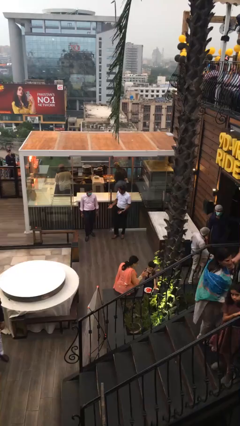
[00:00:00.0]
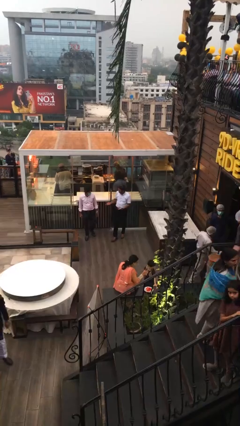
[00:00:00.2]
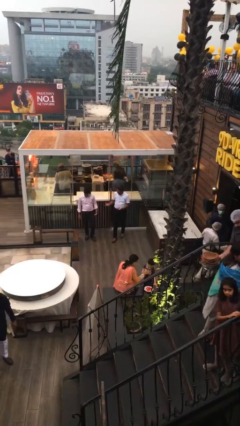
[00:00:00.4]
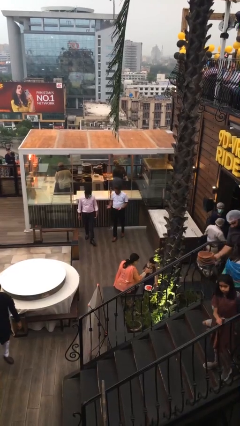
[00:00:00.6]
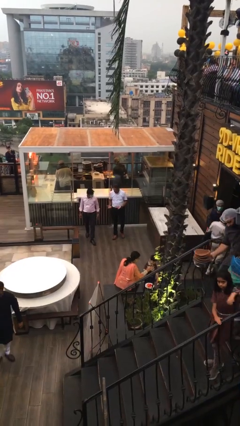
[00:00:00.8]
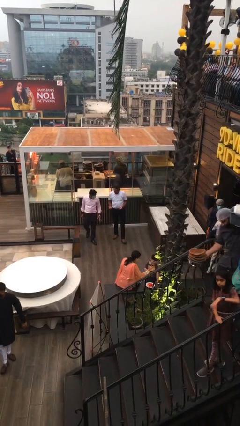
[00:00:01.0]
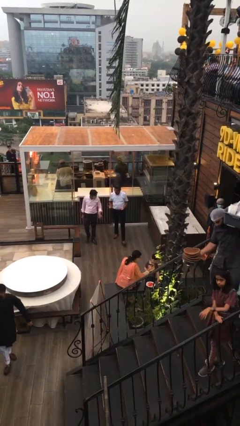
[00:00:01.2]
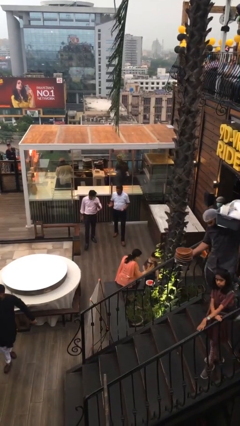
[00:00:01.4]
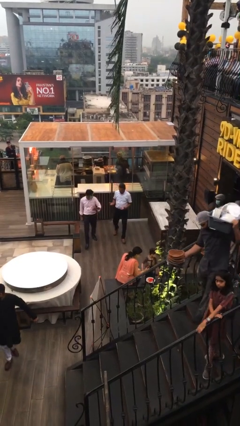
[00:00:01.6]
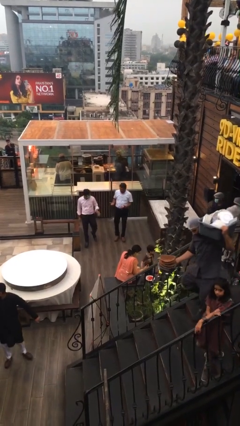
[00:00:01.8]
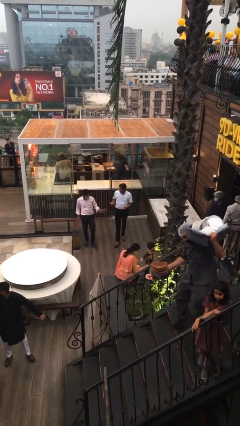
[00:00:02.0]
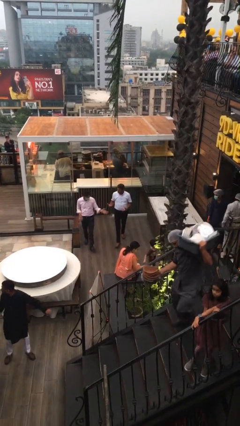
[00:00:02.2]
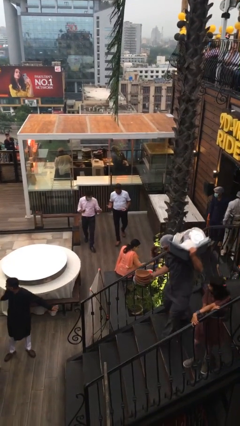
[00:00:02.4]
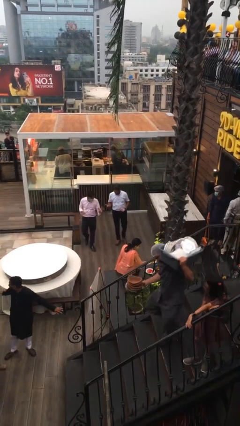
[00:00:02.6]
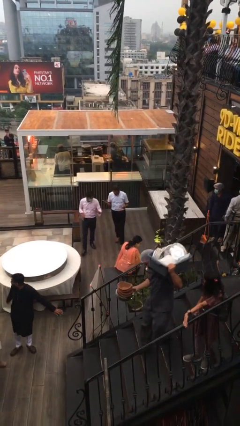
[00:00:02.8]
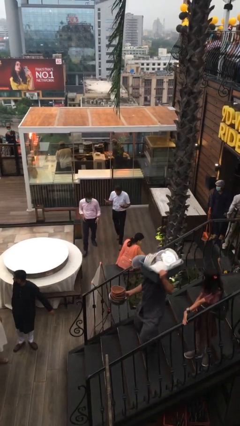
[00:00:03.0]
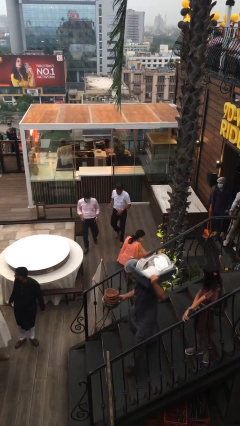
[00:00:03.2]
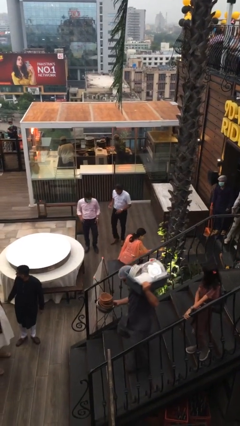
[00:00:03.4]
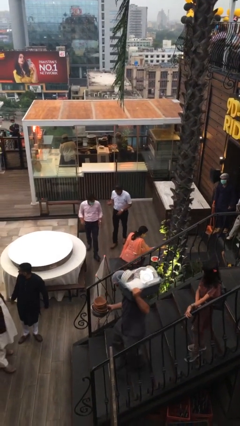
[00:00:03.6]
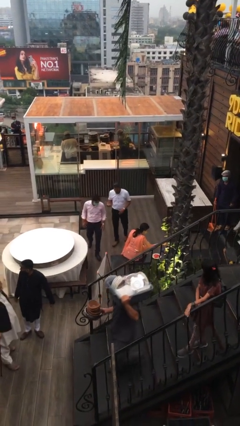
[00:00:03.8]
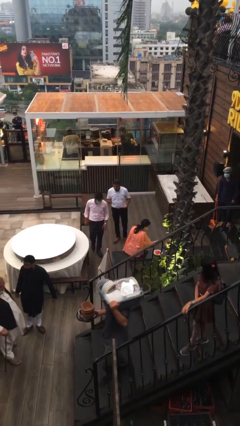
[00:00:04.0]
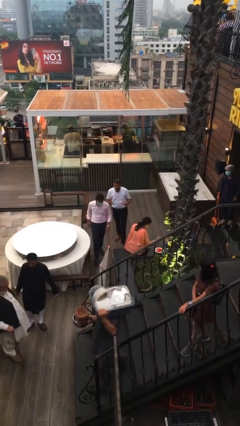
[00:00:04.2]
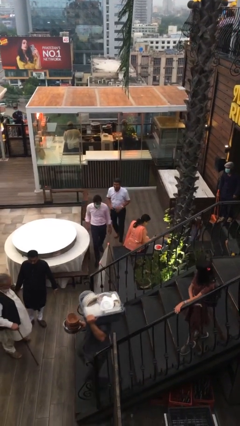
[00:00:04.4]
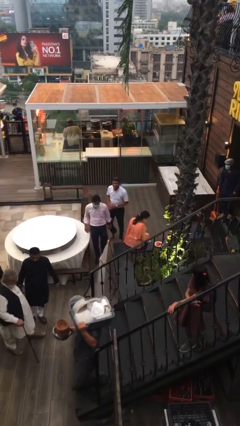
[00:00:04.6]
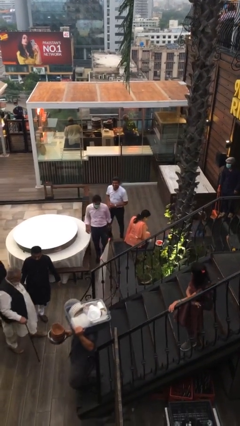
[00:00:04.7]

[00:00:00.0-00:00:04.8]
person talks to person

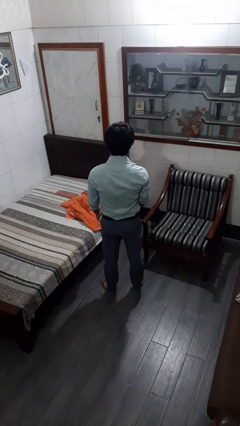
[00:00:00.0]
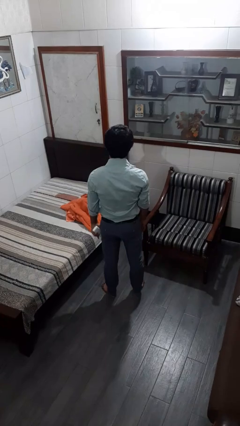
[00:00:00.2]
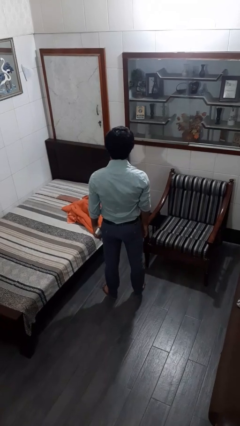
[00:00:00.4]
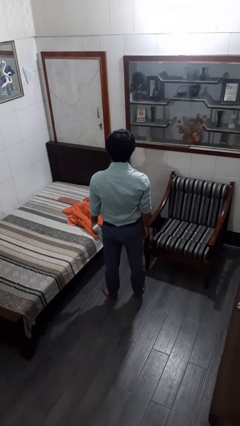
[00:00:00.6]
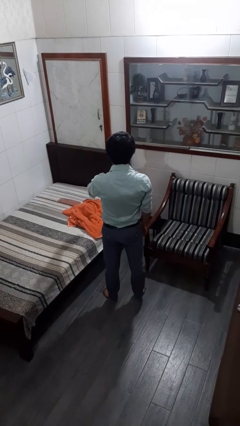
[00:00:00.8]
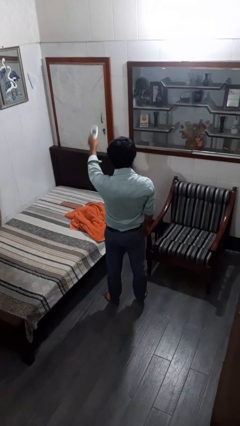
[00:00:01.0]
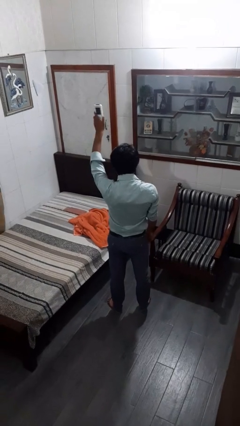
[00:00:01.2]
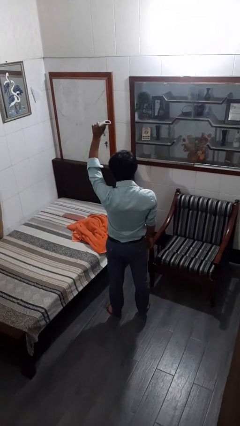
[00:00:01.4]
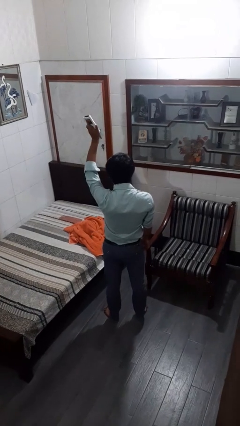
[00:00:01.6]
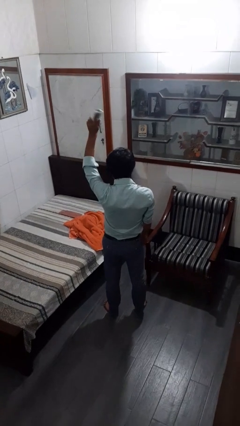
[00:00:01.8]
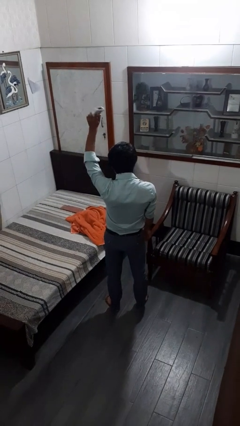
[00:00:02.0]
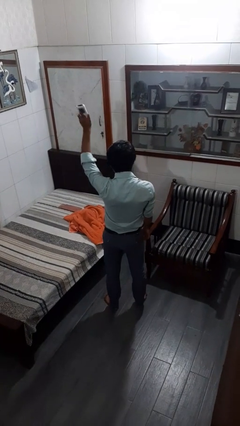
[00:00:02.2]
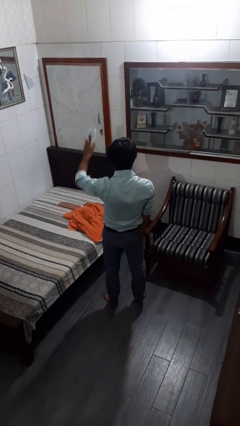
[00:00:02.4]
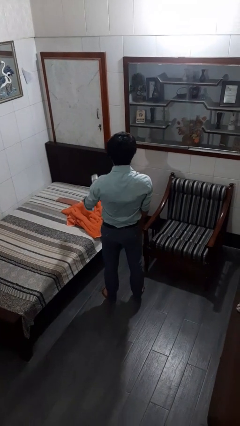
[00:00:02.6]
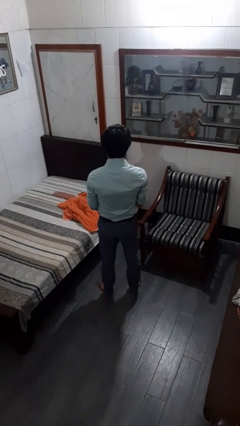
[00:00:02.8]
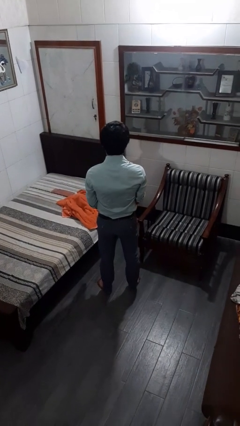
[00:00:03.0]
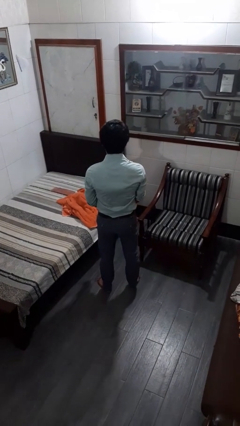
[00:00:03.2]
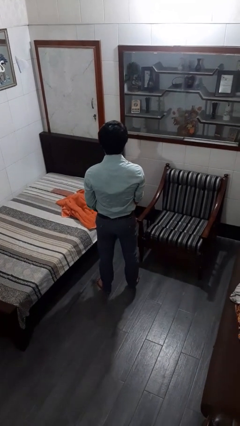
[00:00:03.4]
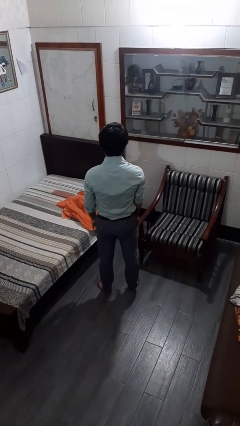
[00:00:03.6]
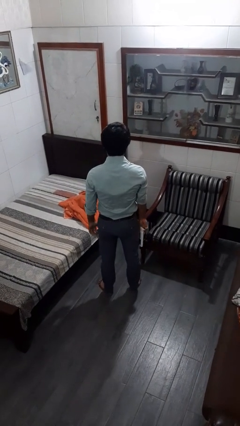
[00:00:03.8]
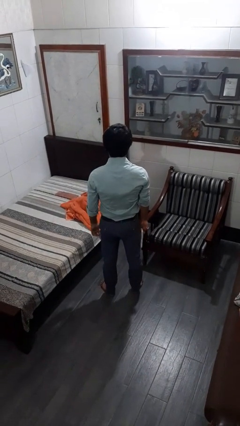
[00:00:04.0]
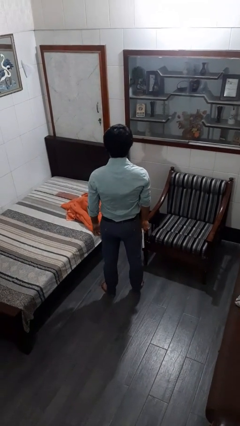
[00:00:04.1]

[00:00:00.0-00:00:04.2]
person holds object above head

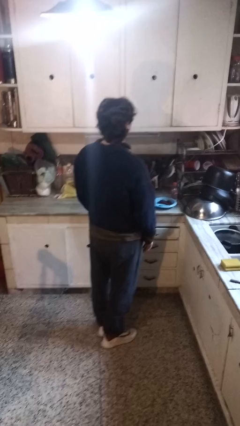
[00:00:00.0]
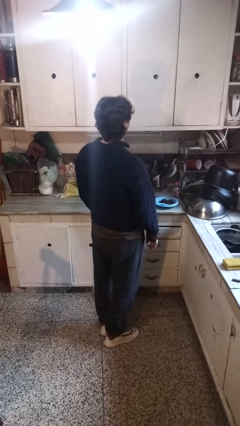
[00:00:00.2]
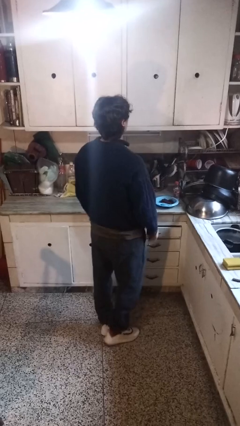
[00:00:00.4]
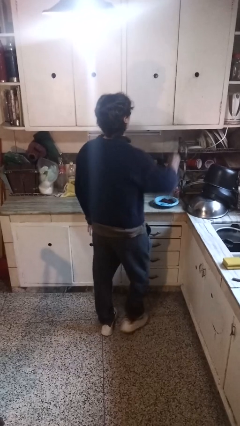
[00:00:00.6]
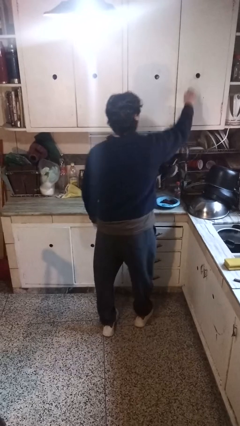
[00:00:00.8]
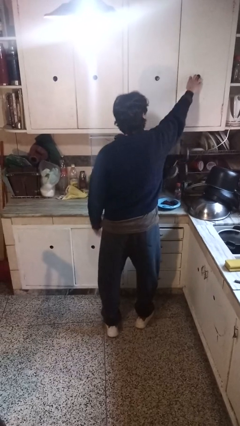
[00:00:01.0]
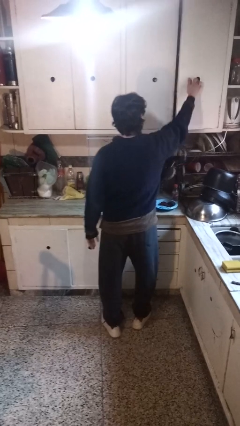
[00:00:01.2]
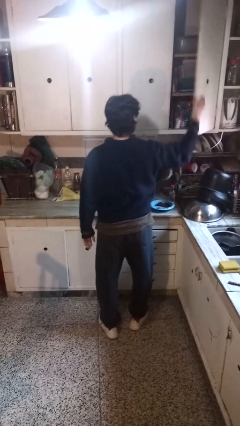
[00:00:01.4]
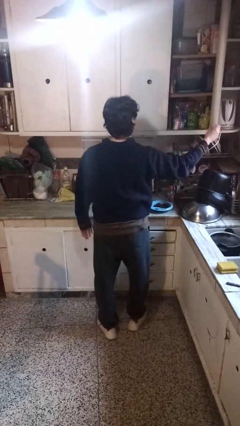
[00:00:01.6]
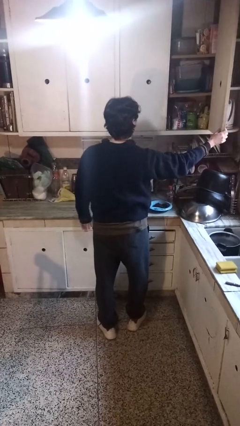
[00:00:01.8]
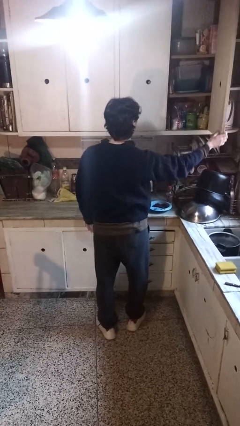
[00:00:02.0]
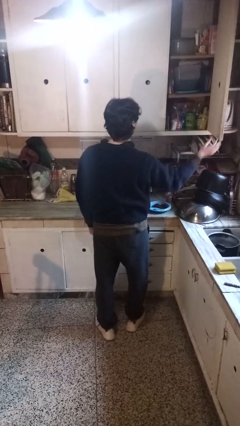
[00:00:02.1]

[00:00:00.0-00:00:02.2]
person opens cabinet

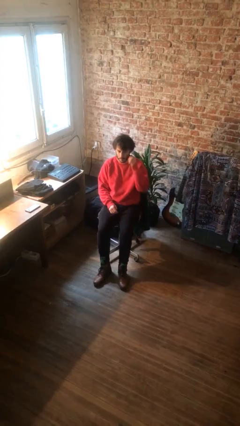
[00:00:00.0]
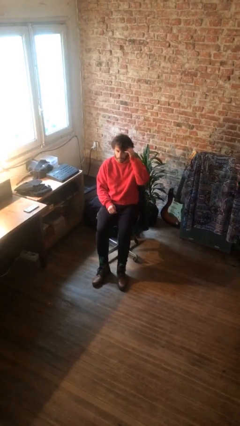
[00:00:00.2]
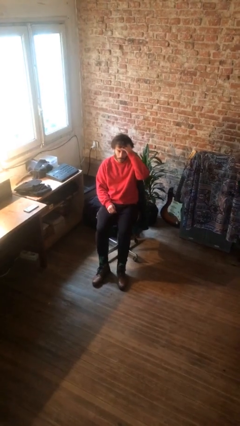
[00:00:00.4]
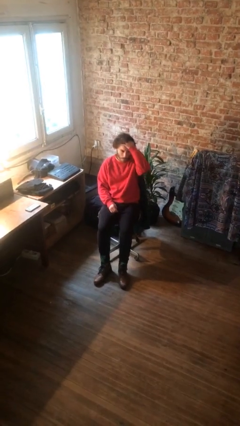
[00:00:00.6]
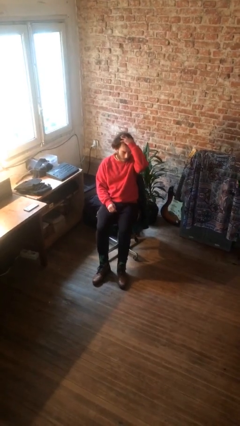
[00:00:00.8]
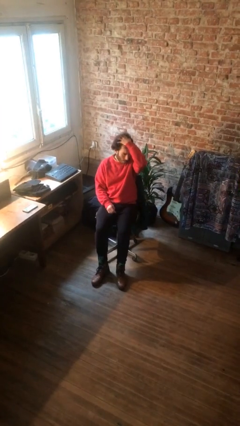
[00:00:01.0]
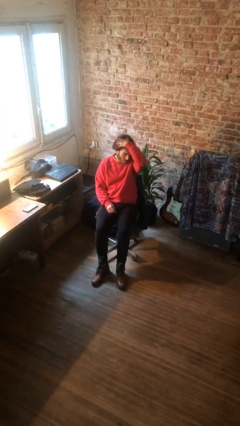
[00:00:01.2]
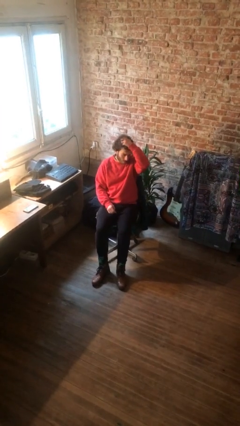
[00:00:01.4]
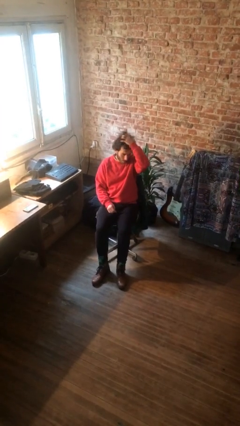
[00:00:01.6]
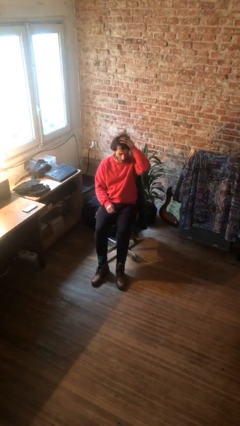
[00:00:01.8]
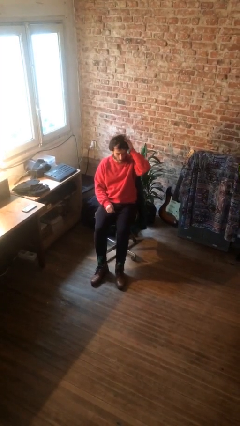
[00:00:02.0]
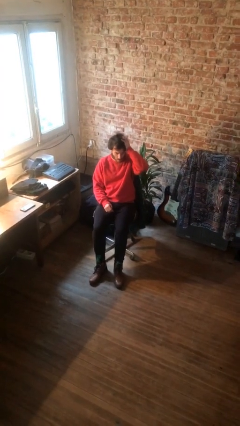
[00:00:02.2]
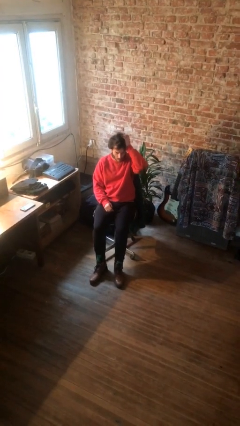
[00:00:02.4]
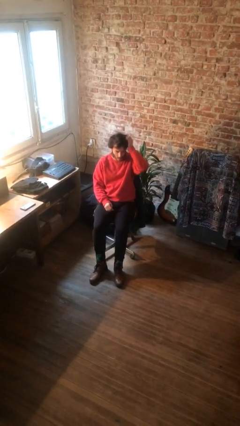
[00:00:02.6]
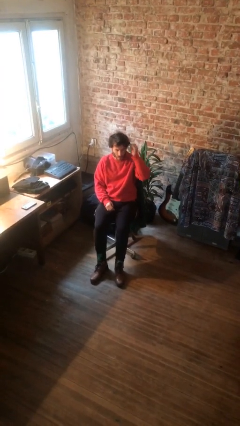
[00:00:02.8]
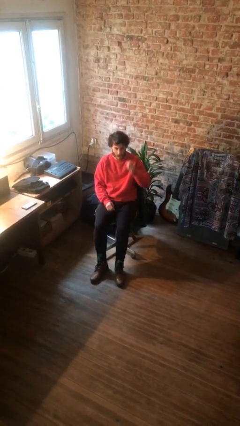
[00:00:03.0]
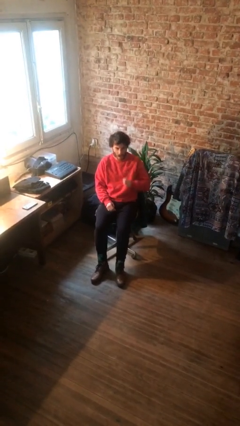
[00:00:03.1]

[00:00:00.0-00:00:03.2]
person scratches face

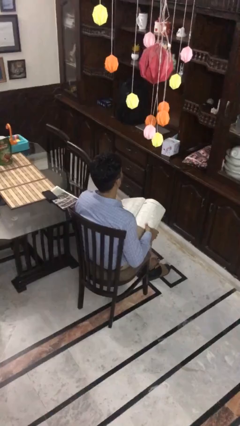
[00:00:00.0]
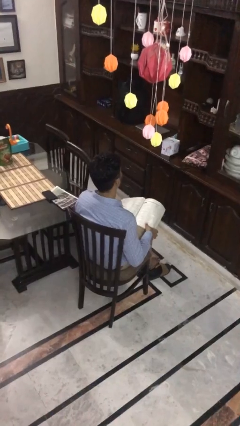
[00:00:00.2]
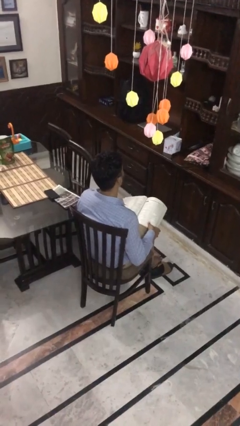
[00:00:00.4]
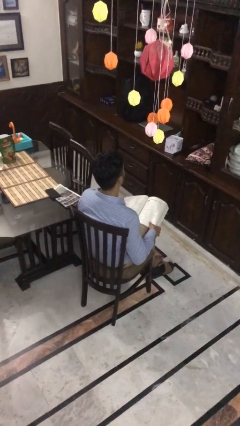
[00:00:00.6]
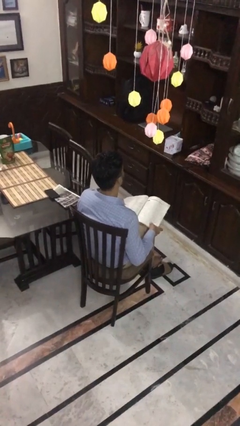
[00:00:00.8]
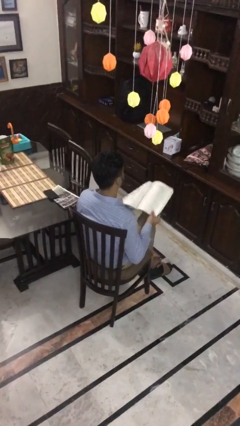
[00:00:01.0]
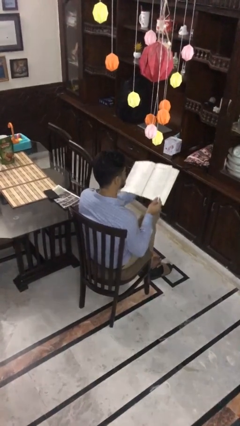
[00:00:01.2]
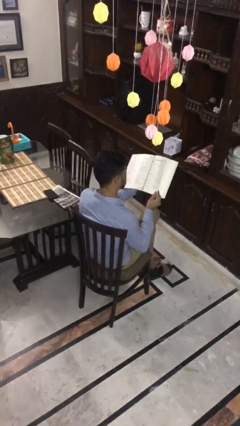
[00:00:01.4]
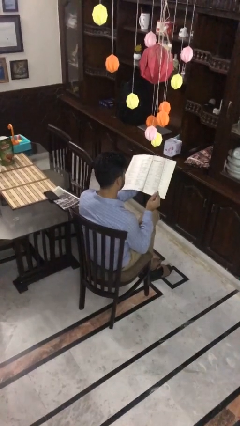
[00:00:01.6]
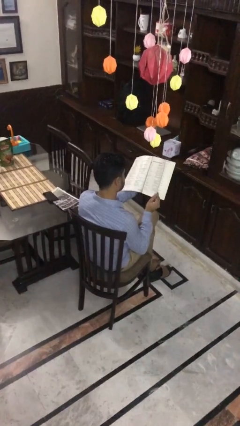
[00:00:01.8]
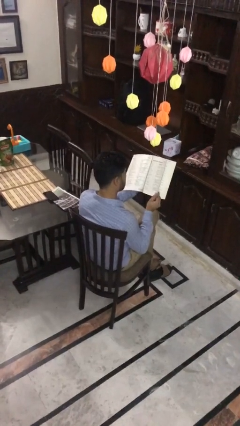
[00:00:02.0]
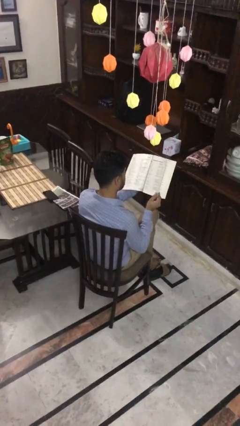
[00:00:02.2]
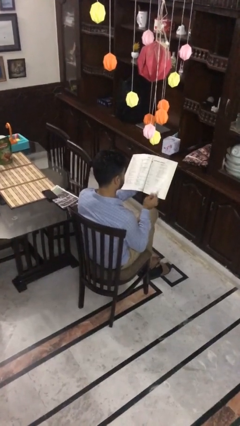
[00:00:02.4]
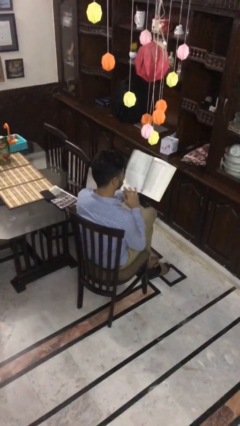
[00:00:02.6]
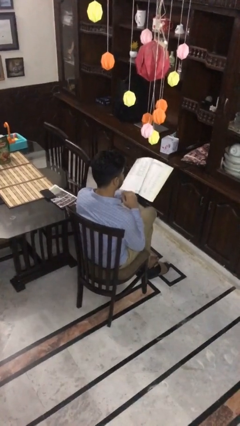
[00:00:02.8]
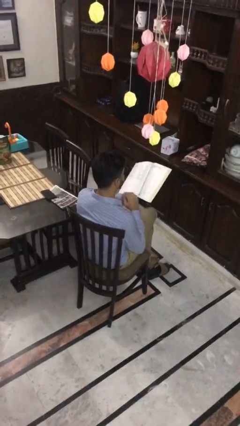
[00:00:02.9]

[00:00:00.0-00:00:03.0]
person reads book
